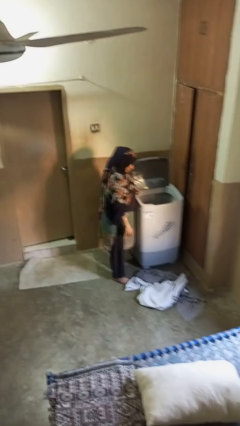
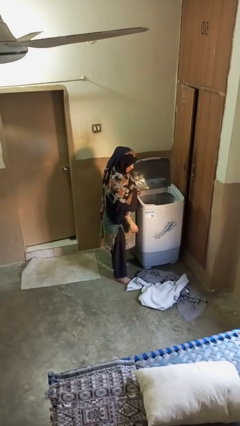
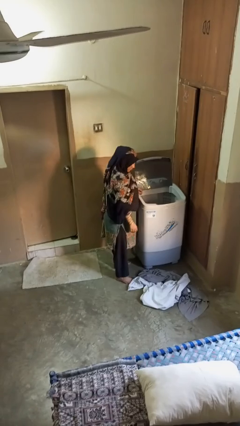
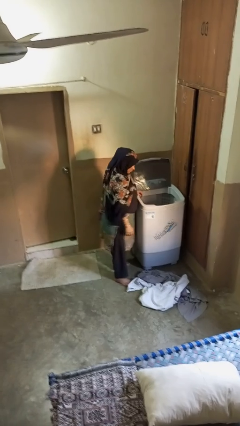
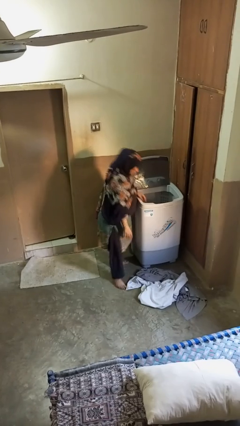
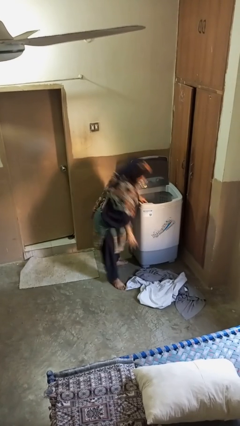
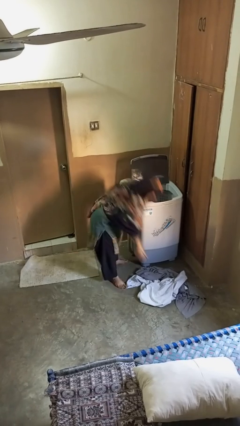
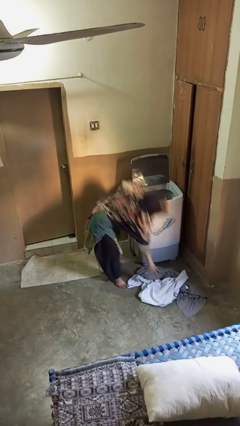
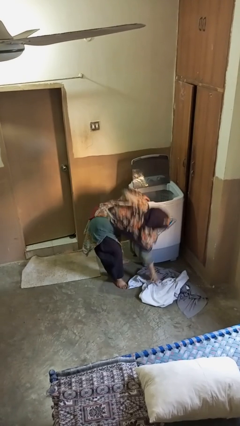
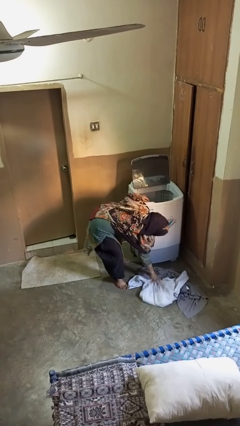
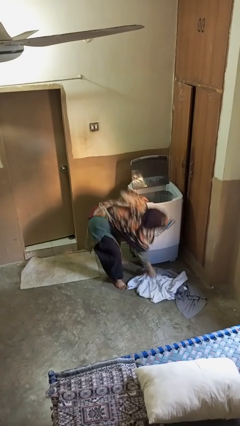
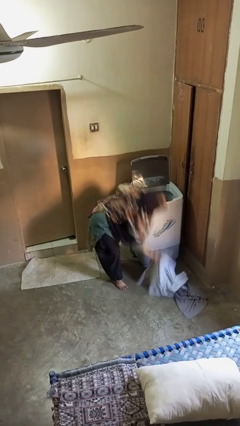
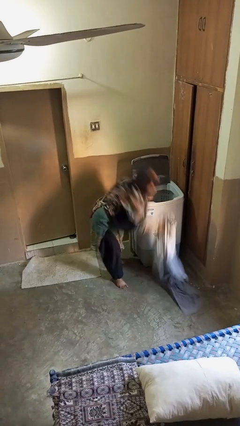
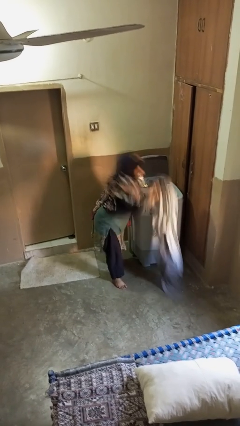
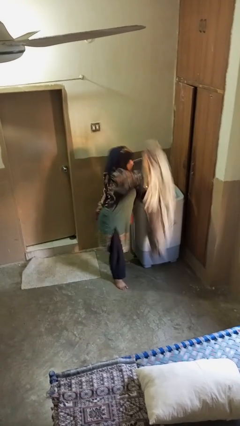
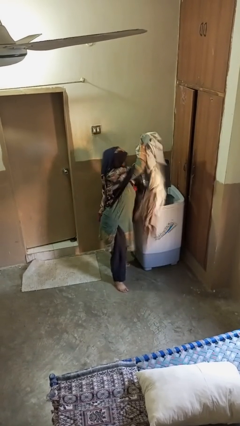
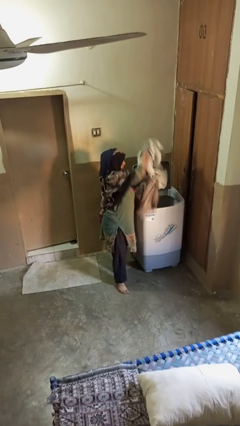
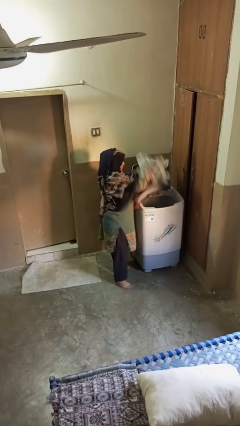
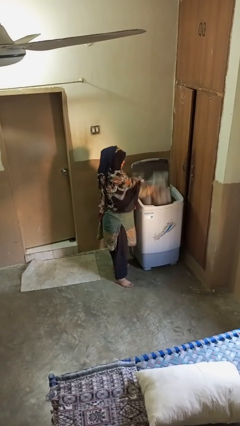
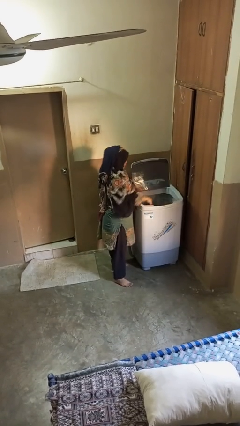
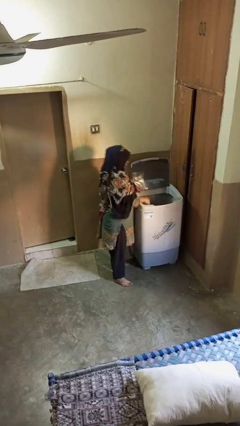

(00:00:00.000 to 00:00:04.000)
person loads clotheswasher

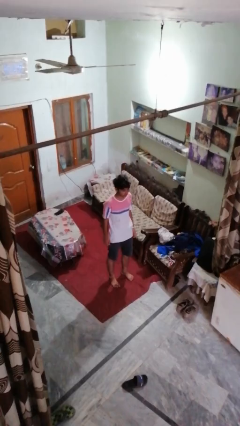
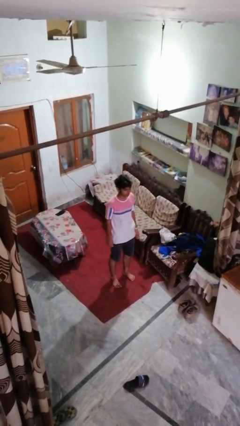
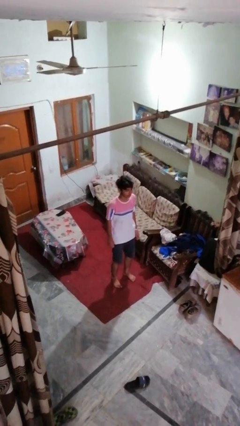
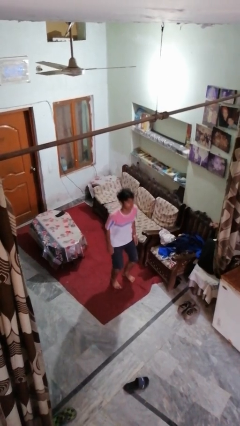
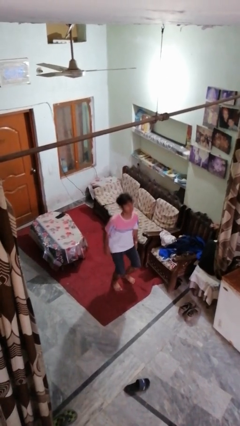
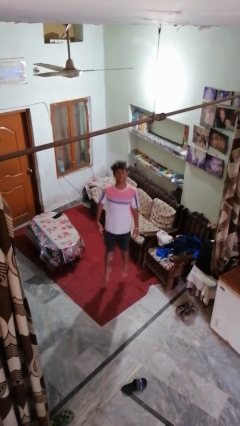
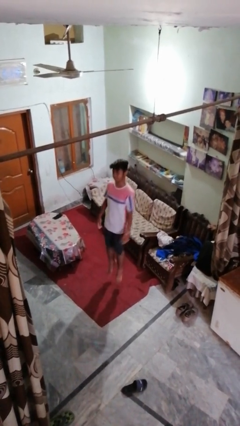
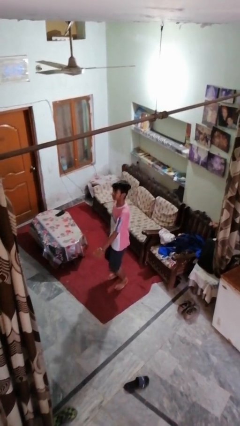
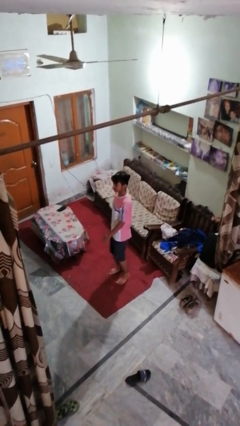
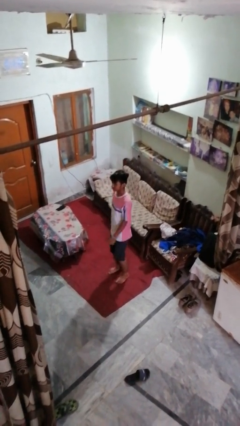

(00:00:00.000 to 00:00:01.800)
person jumps

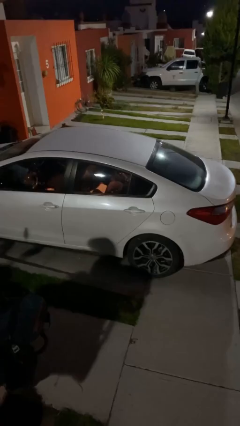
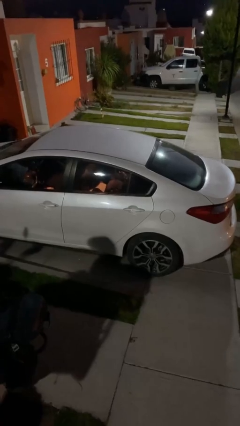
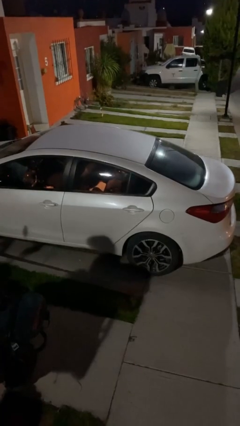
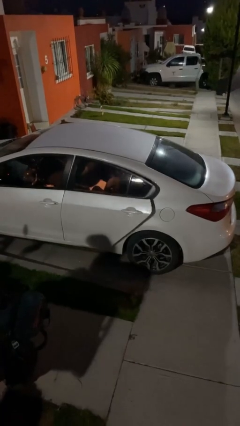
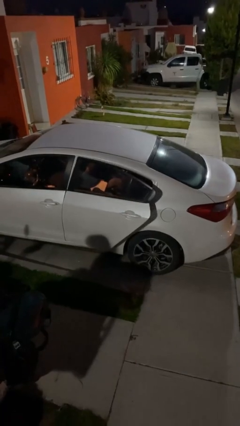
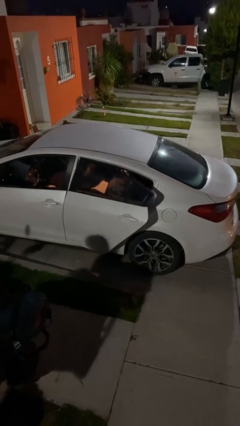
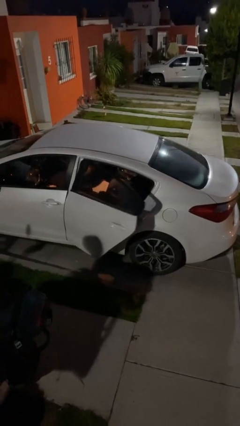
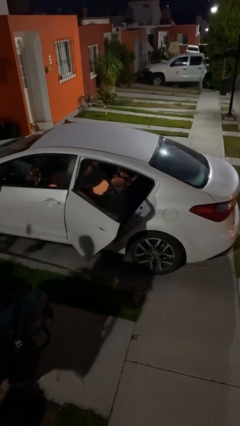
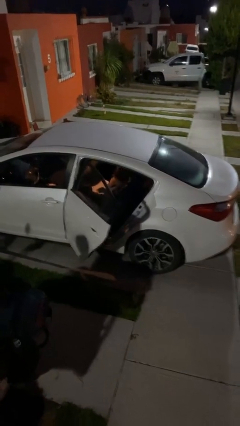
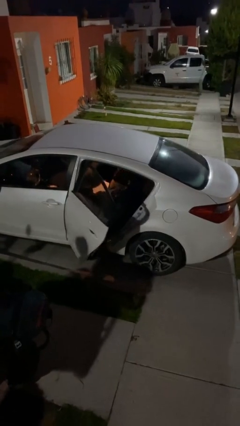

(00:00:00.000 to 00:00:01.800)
person opens car door

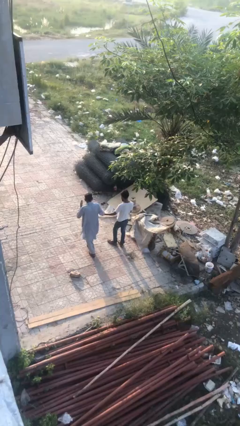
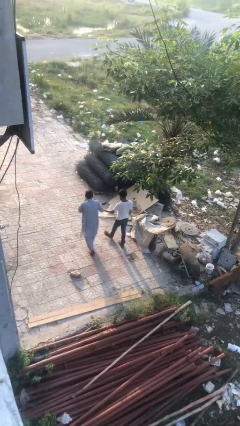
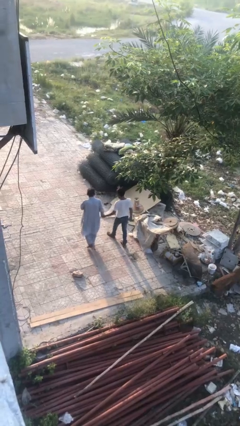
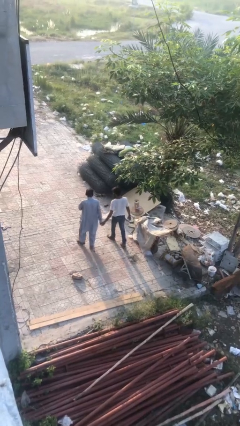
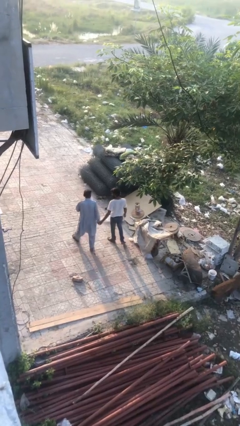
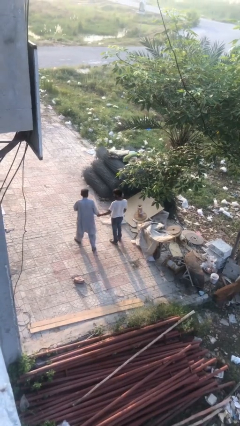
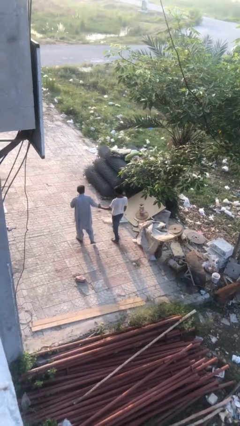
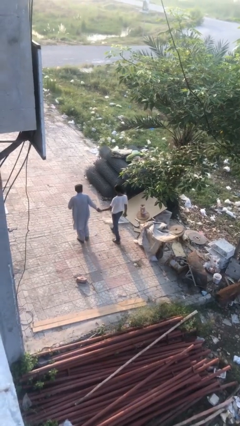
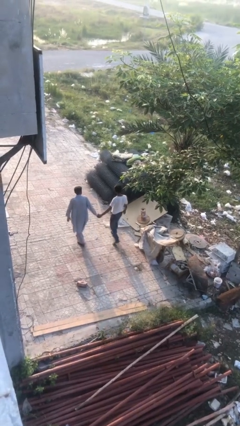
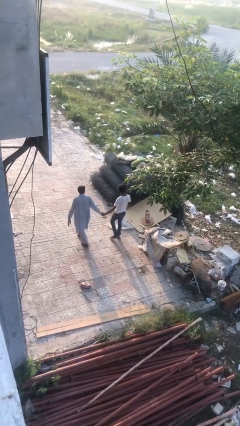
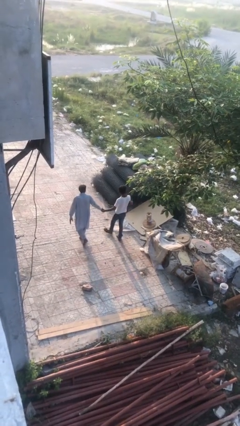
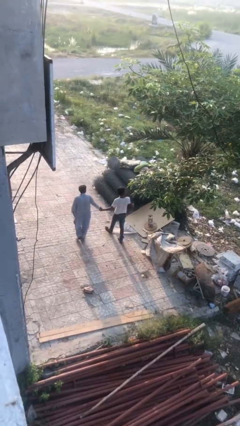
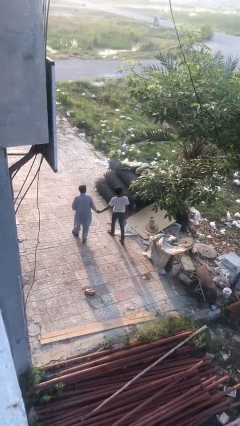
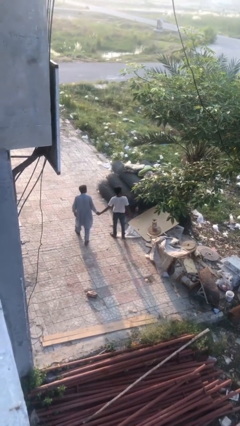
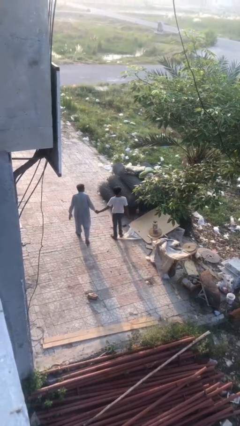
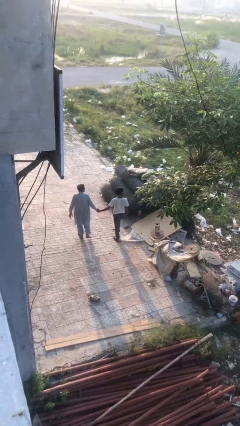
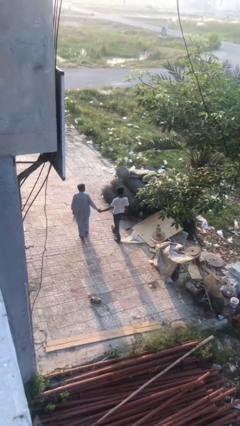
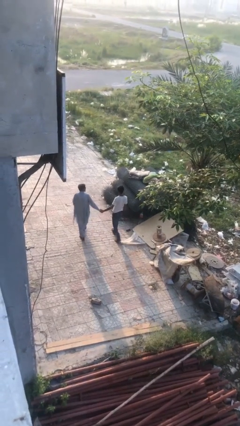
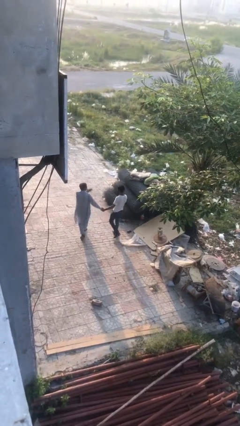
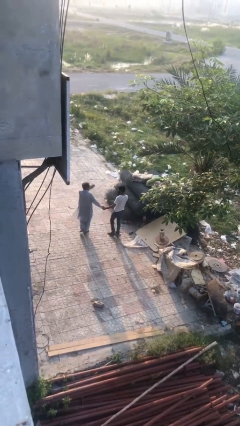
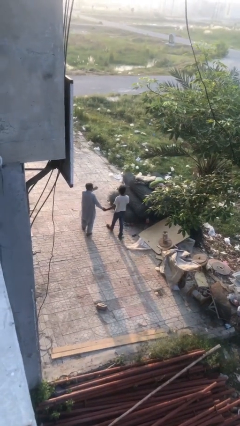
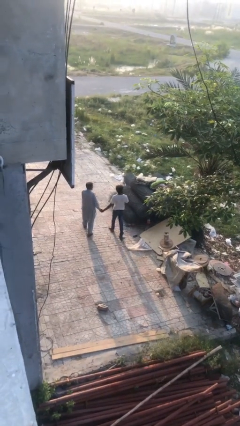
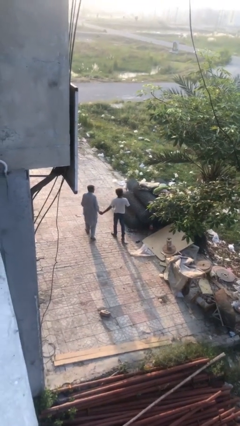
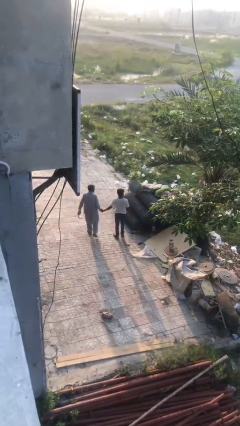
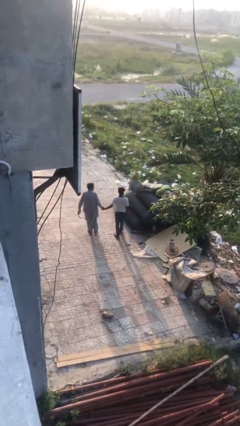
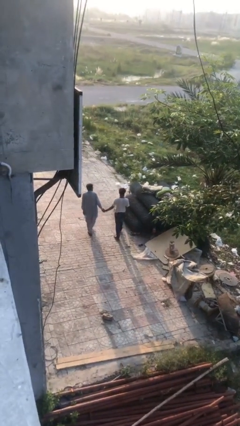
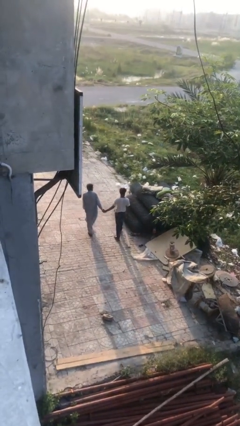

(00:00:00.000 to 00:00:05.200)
person holds hand

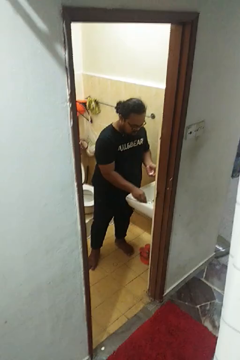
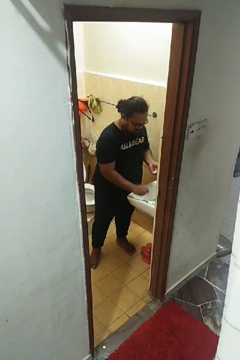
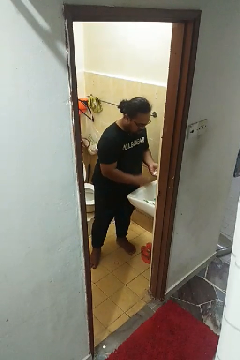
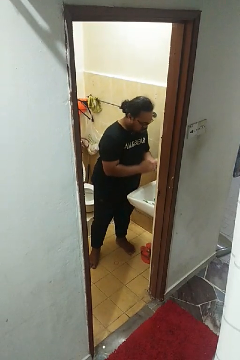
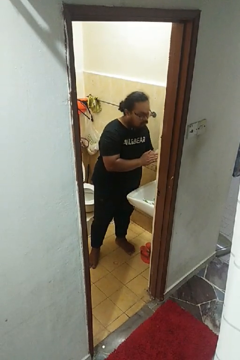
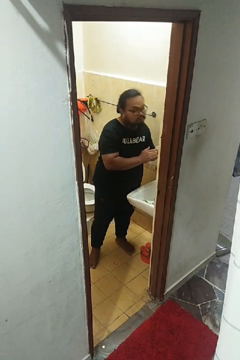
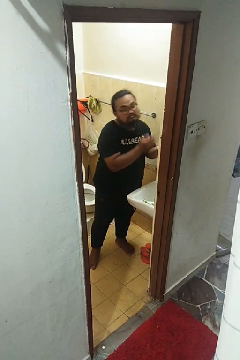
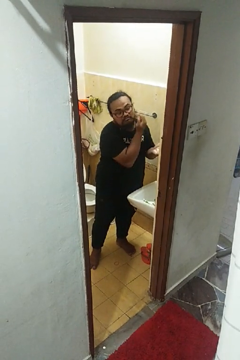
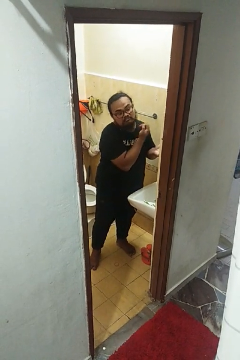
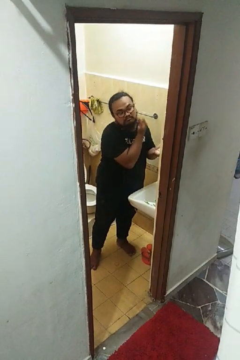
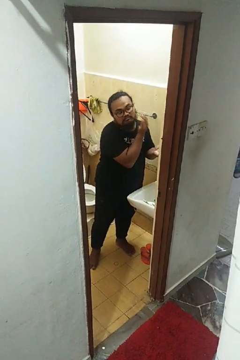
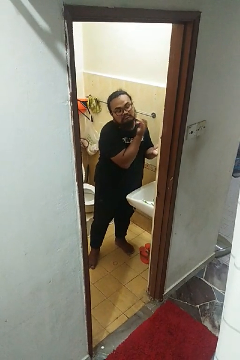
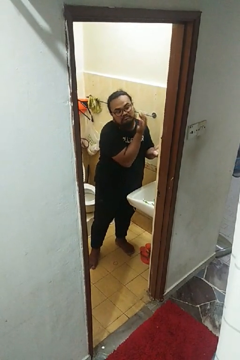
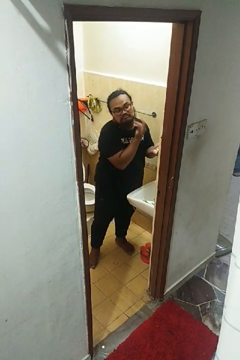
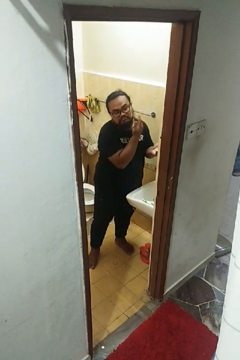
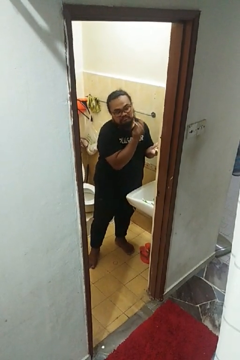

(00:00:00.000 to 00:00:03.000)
person applies shaving cream

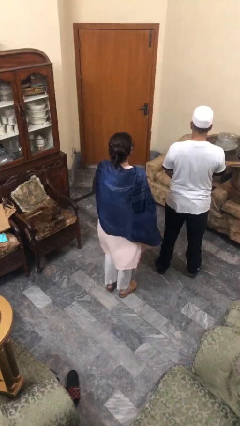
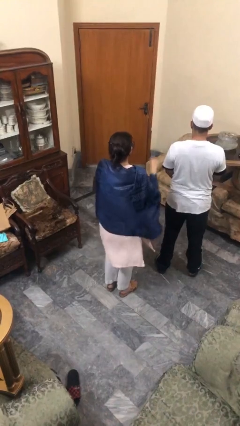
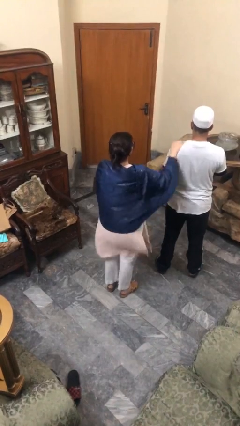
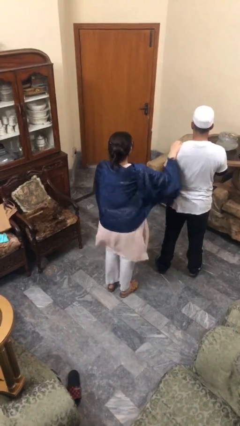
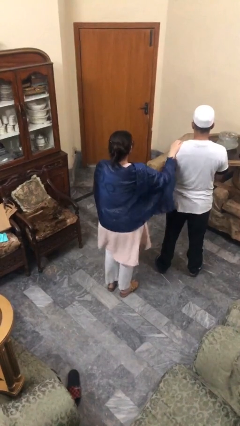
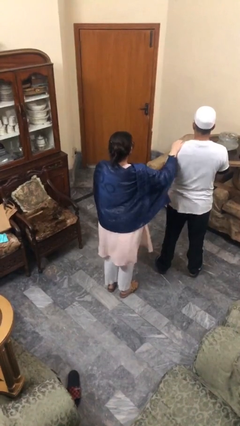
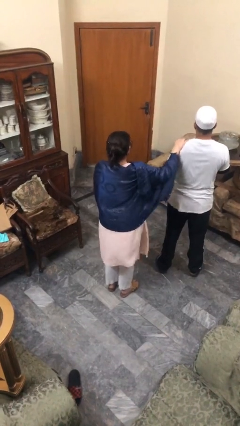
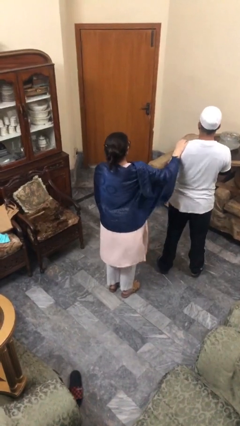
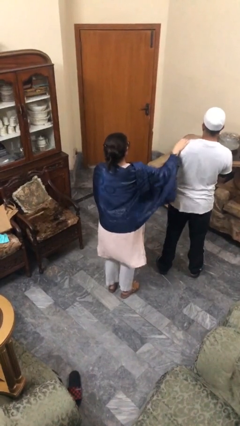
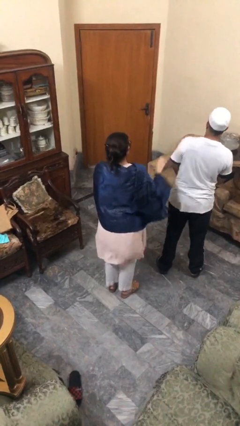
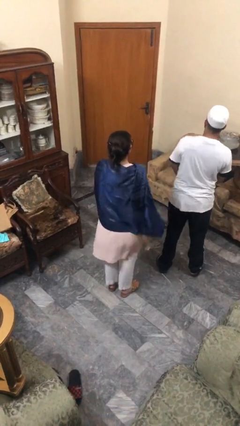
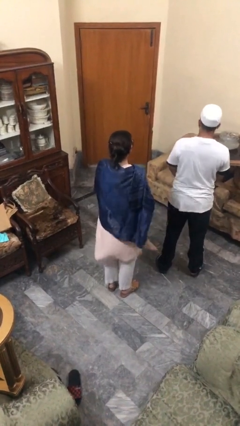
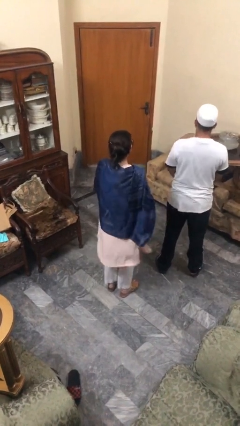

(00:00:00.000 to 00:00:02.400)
person pounds shoulders of person
